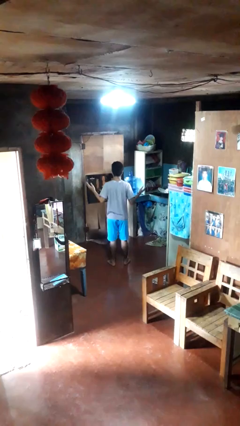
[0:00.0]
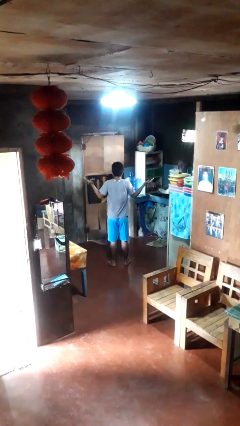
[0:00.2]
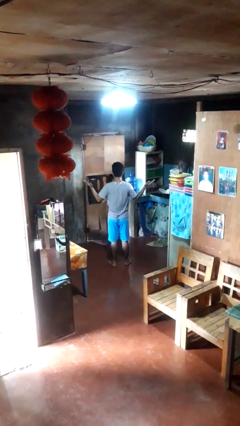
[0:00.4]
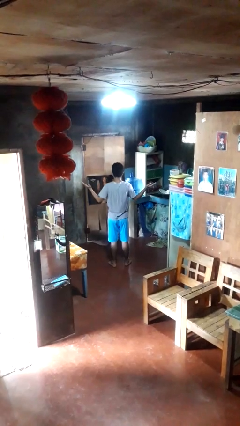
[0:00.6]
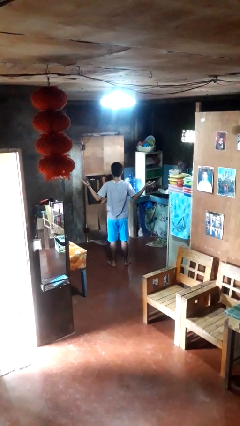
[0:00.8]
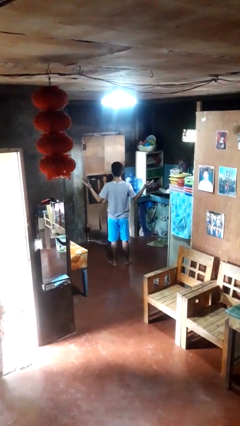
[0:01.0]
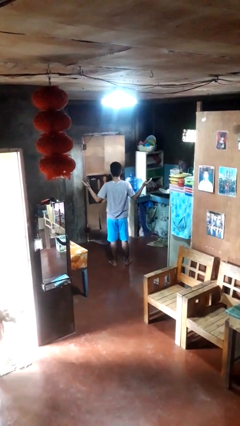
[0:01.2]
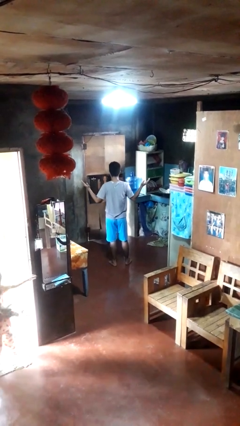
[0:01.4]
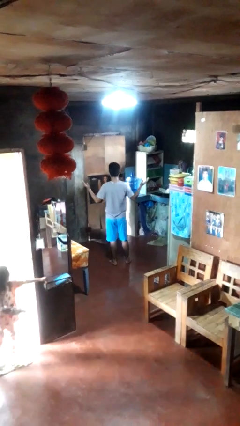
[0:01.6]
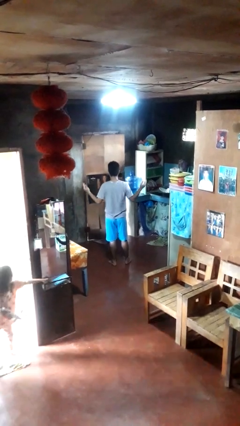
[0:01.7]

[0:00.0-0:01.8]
person shrugs

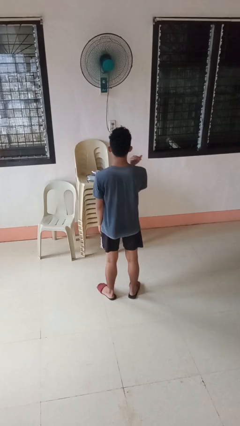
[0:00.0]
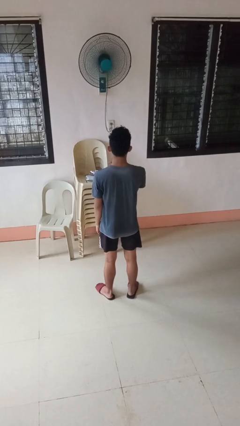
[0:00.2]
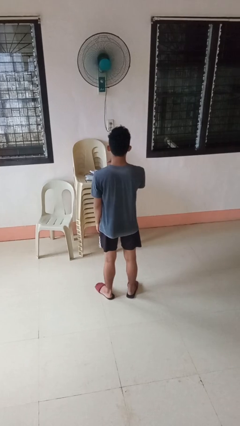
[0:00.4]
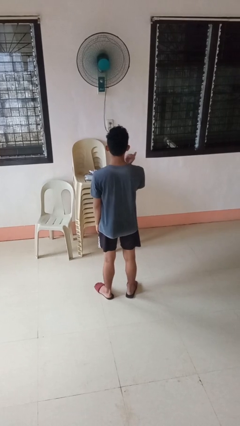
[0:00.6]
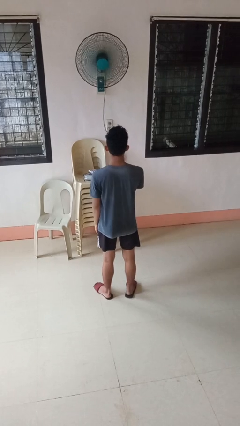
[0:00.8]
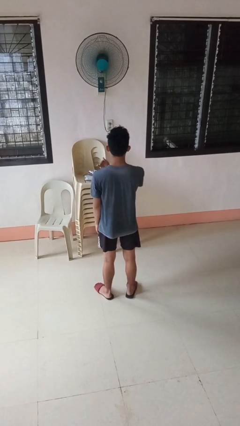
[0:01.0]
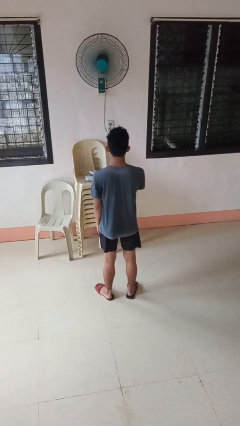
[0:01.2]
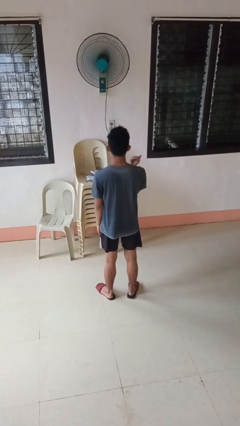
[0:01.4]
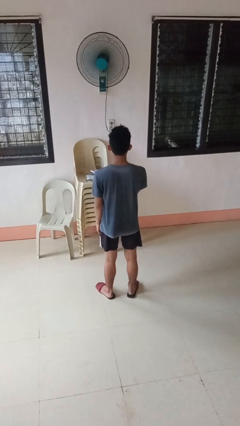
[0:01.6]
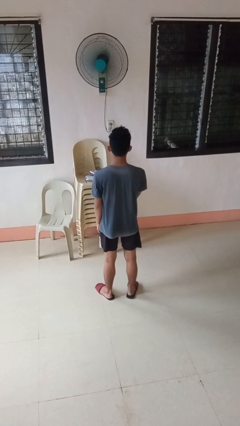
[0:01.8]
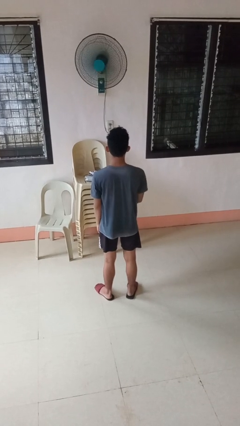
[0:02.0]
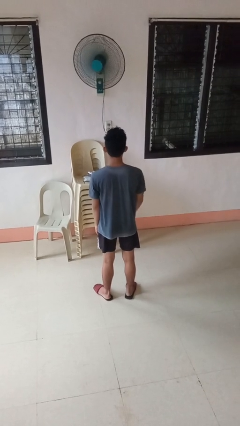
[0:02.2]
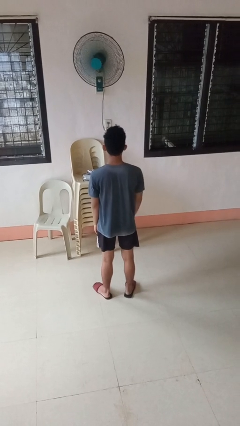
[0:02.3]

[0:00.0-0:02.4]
person gestures cut

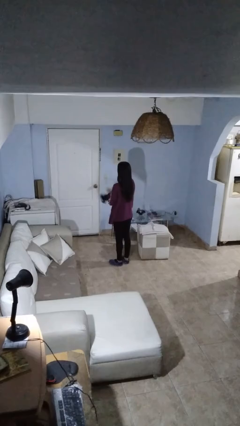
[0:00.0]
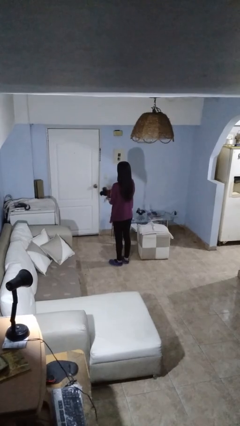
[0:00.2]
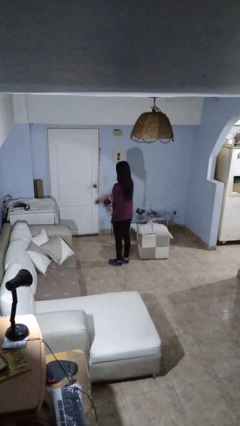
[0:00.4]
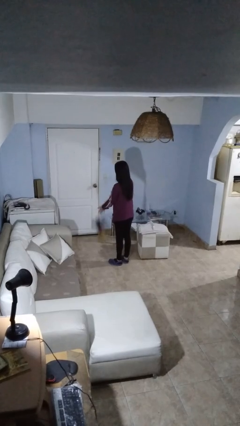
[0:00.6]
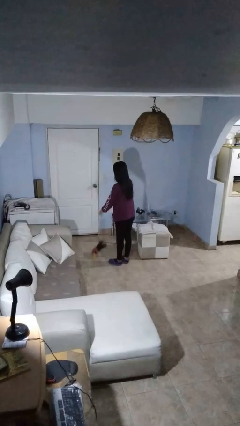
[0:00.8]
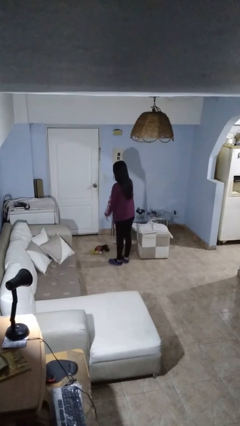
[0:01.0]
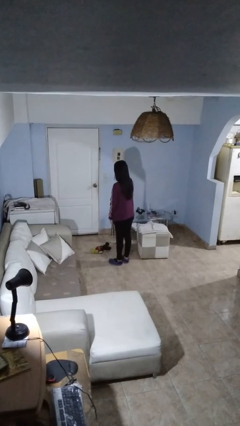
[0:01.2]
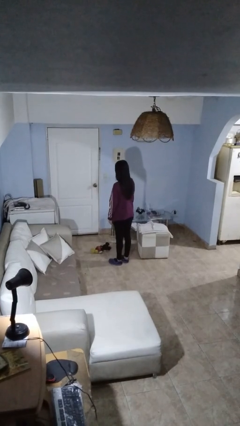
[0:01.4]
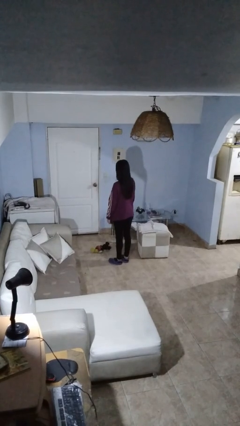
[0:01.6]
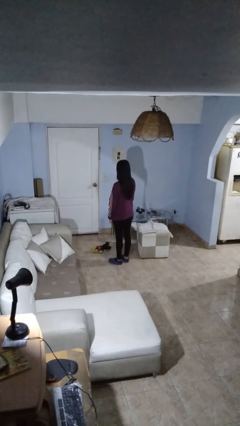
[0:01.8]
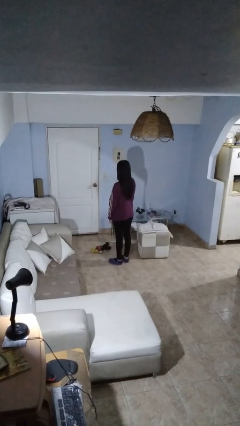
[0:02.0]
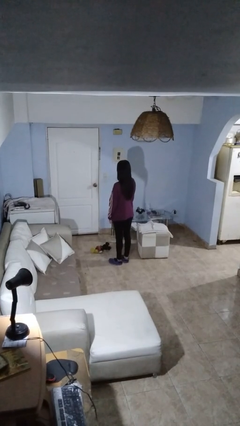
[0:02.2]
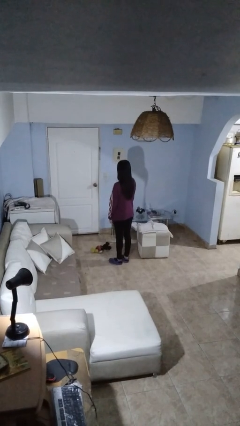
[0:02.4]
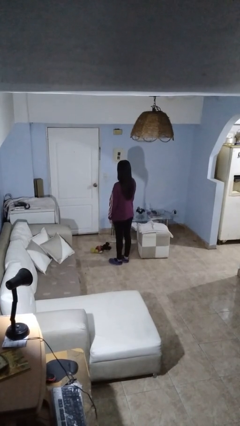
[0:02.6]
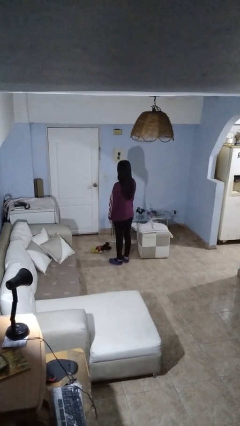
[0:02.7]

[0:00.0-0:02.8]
person drops object

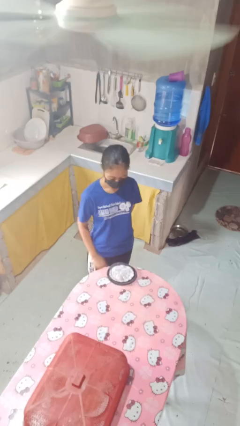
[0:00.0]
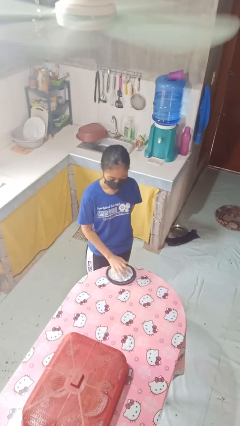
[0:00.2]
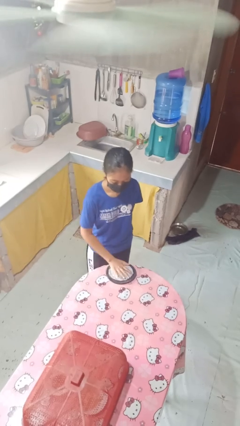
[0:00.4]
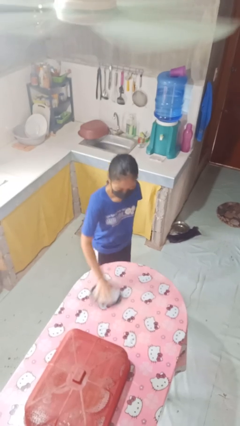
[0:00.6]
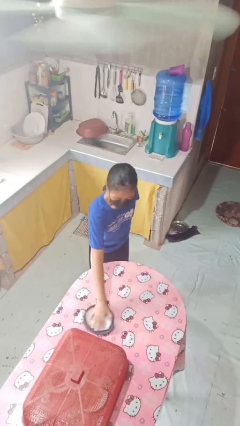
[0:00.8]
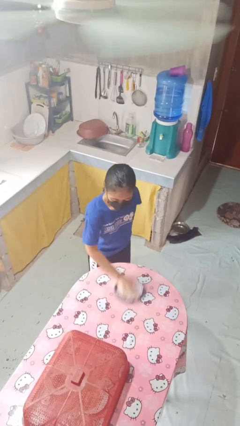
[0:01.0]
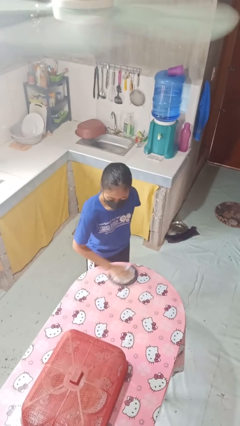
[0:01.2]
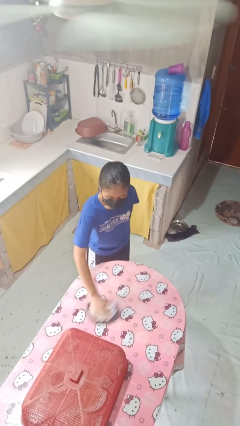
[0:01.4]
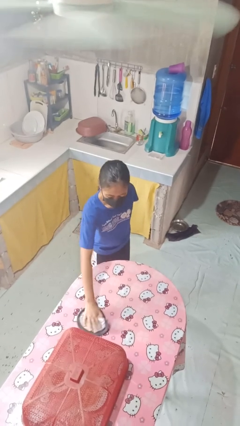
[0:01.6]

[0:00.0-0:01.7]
person cleans table with rag

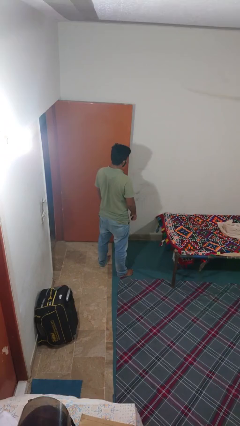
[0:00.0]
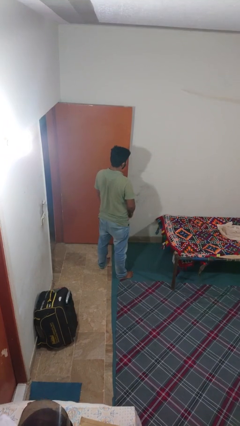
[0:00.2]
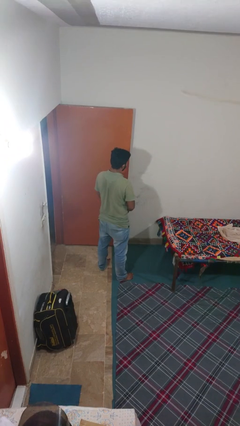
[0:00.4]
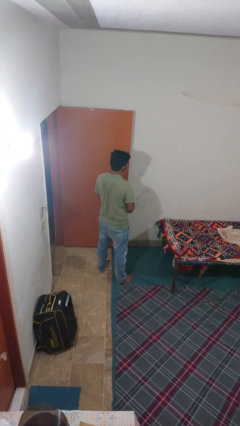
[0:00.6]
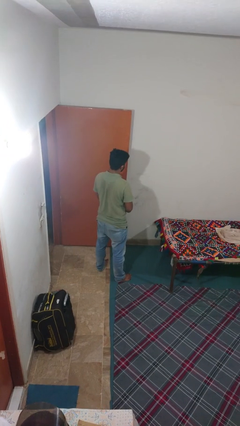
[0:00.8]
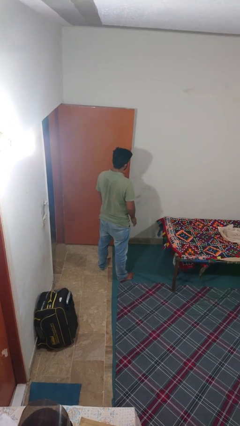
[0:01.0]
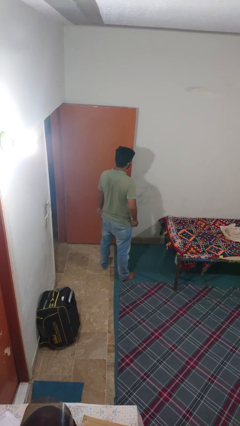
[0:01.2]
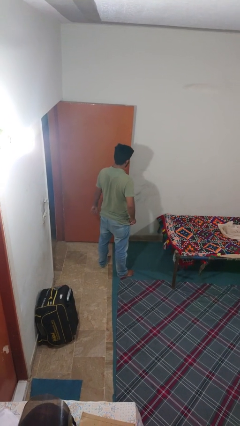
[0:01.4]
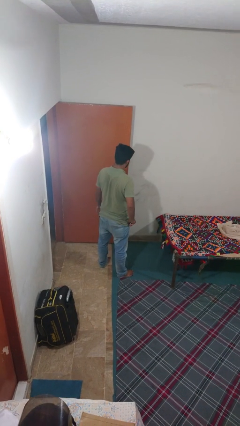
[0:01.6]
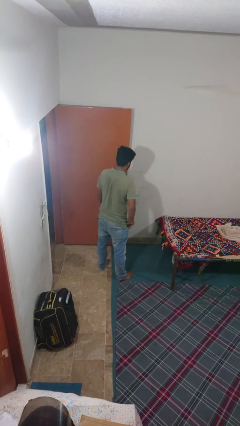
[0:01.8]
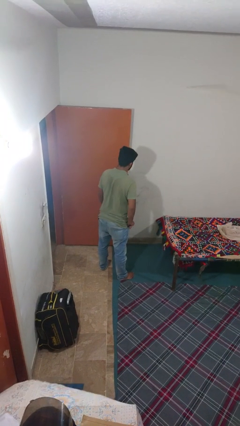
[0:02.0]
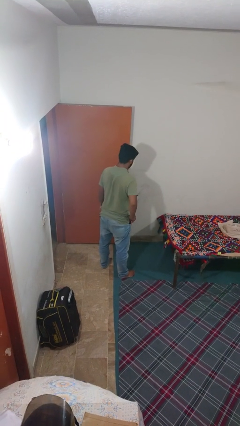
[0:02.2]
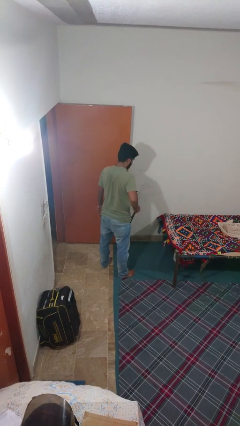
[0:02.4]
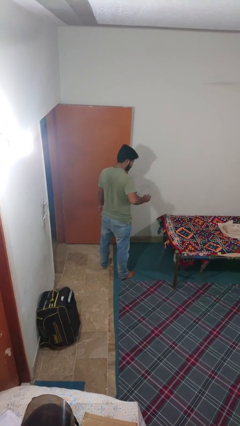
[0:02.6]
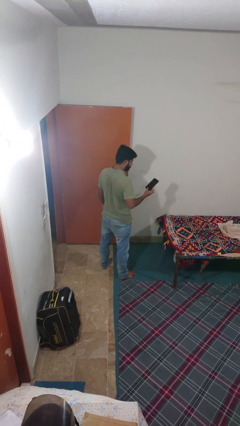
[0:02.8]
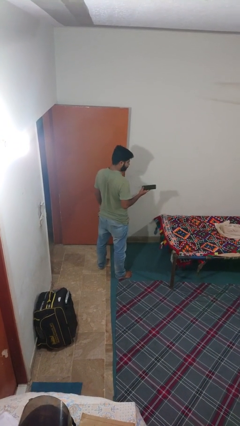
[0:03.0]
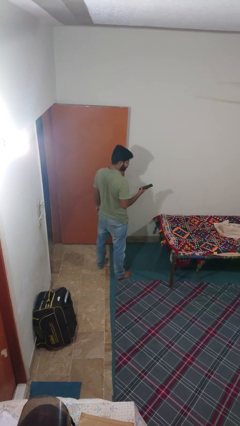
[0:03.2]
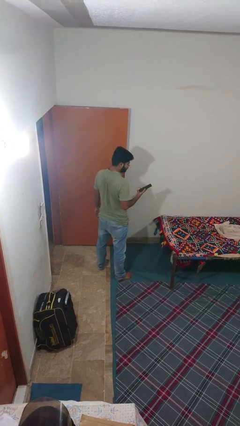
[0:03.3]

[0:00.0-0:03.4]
person takes phone from pocket

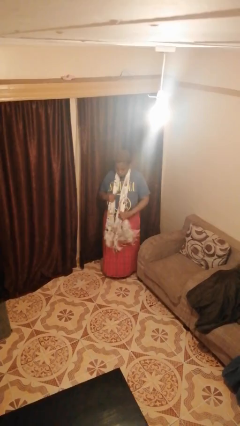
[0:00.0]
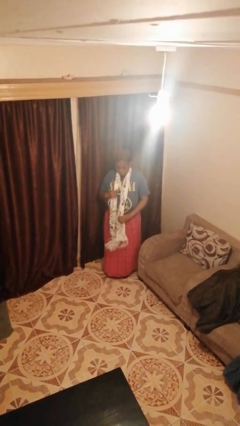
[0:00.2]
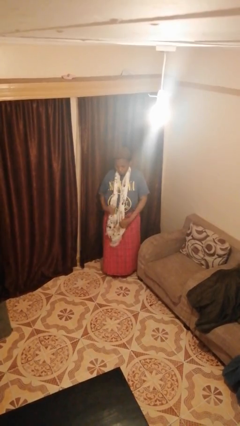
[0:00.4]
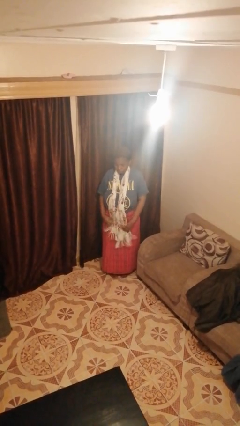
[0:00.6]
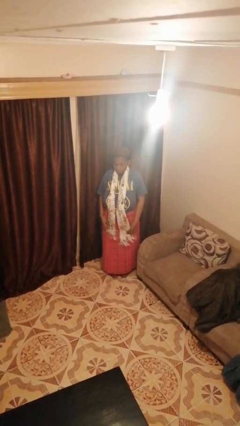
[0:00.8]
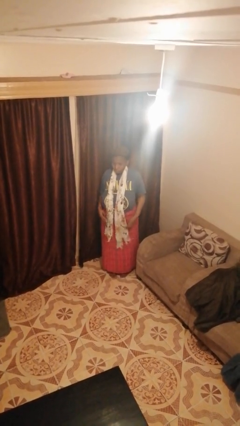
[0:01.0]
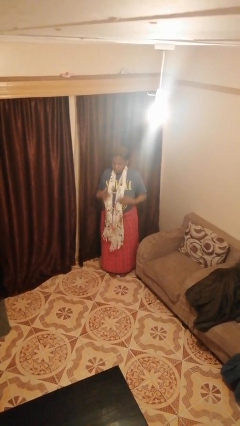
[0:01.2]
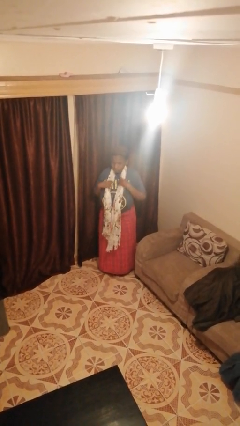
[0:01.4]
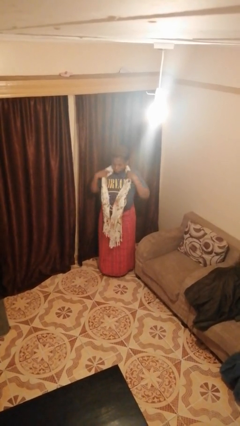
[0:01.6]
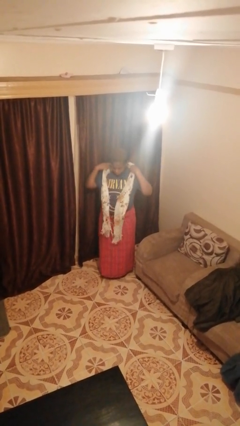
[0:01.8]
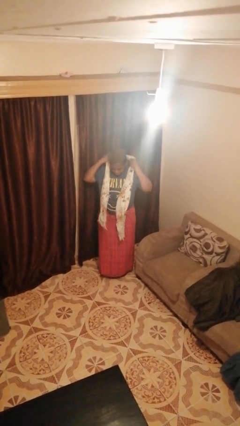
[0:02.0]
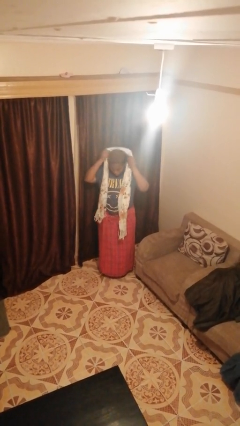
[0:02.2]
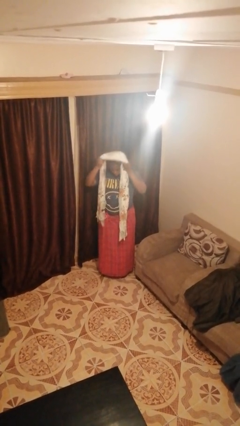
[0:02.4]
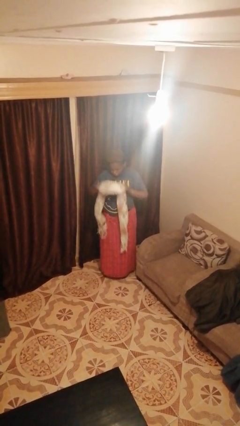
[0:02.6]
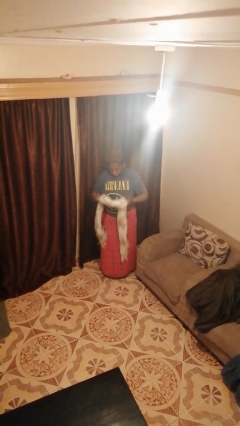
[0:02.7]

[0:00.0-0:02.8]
person takes off scarf

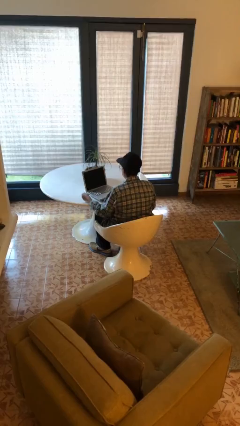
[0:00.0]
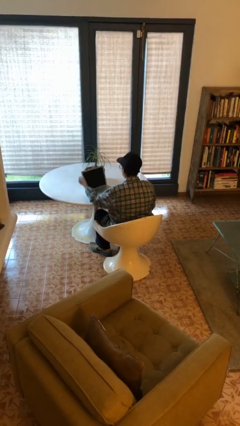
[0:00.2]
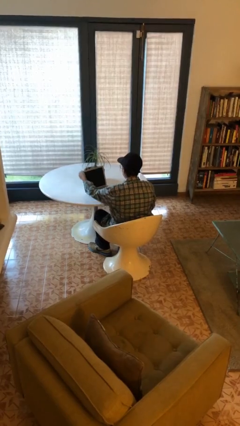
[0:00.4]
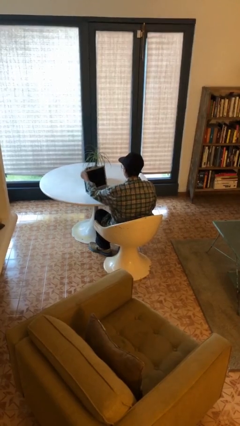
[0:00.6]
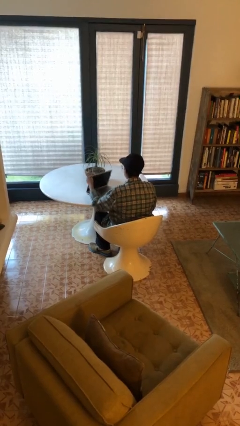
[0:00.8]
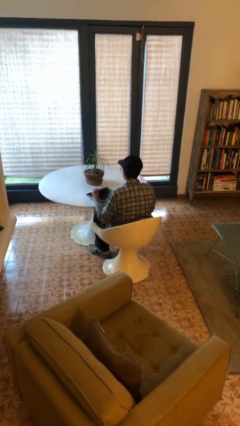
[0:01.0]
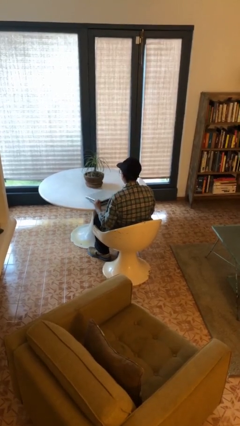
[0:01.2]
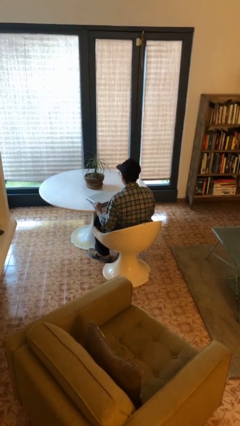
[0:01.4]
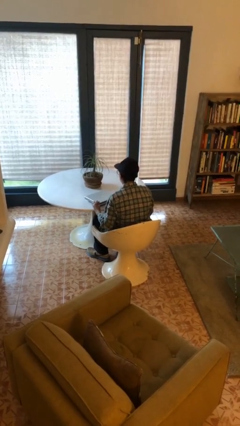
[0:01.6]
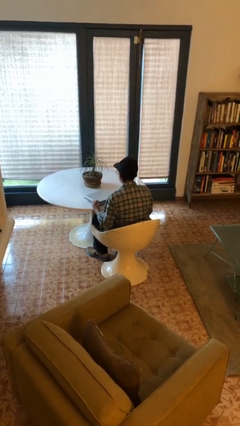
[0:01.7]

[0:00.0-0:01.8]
person closes laptop
